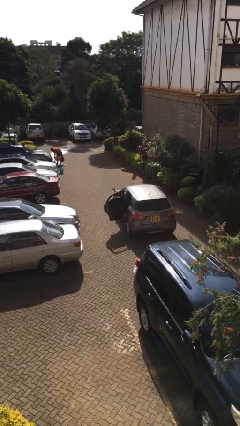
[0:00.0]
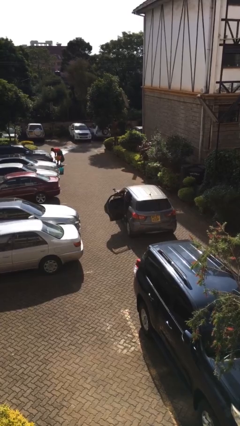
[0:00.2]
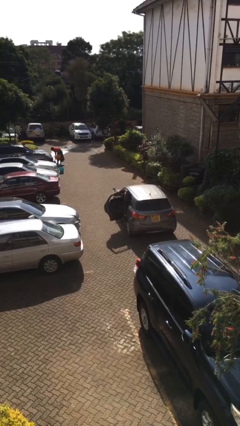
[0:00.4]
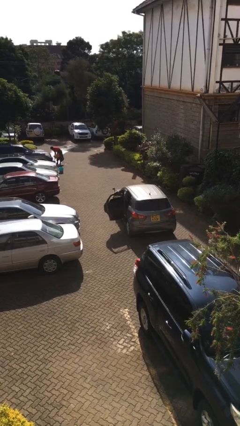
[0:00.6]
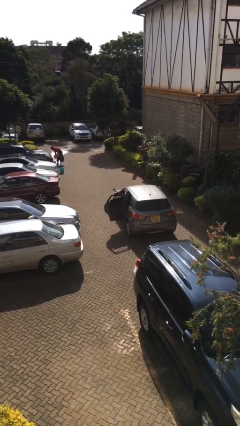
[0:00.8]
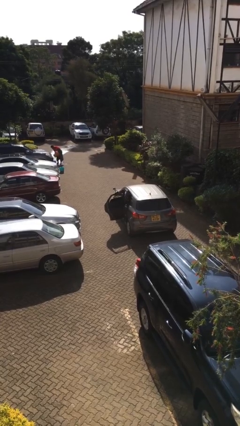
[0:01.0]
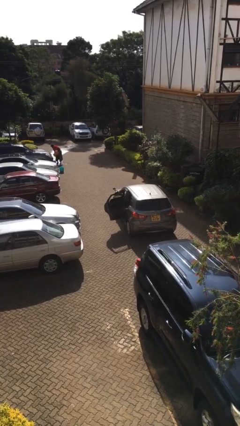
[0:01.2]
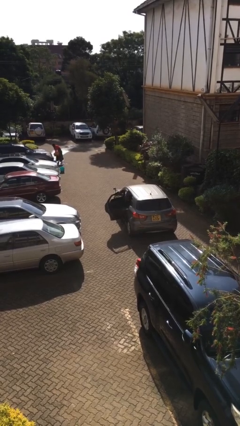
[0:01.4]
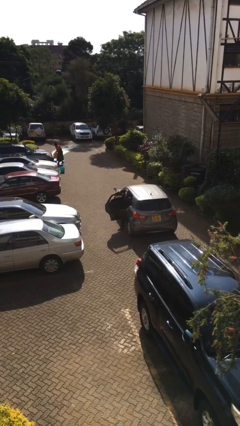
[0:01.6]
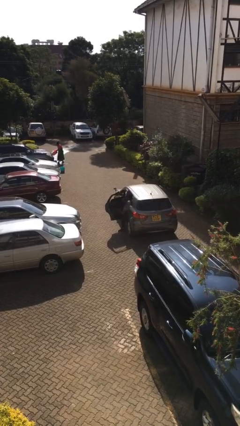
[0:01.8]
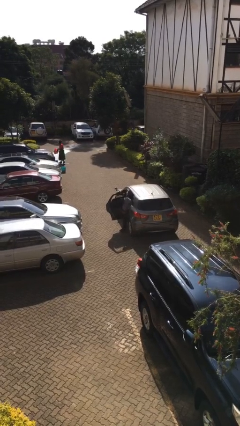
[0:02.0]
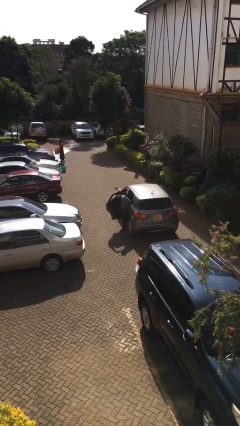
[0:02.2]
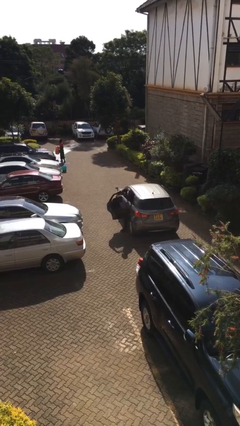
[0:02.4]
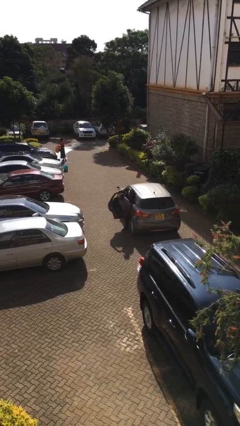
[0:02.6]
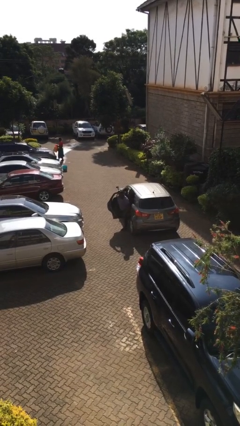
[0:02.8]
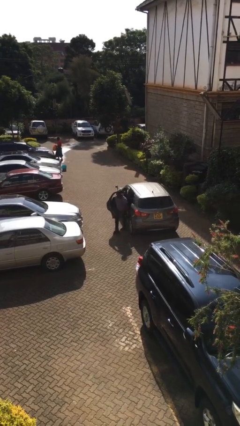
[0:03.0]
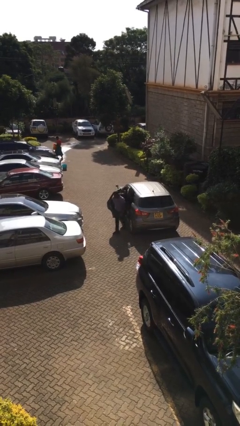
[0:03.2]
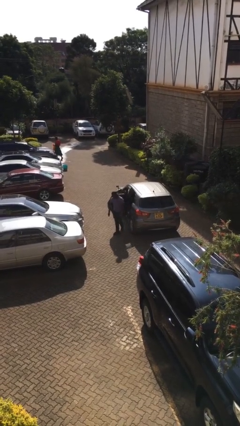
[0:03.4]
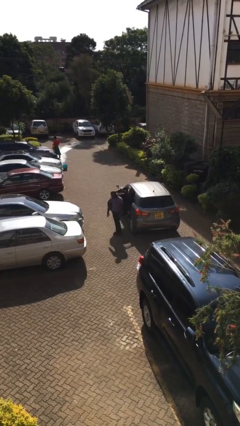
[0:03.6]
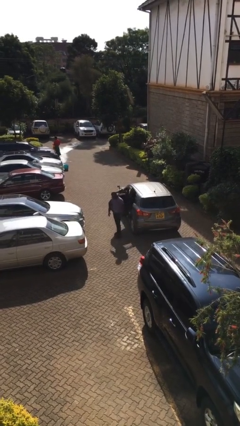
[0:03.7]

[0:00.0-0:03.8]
person exits car

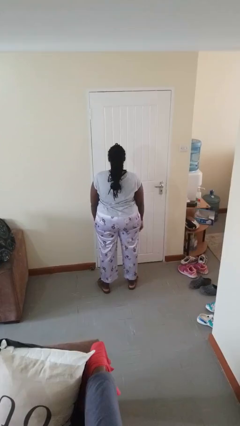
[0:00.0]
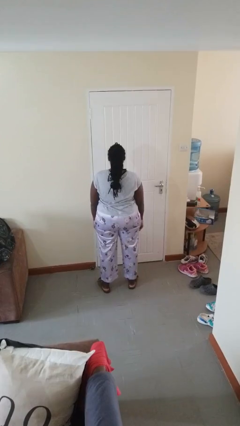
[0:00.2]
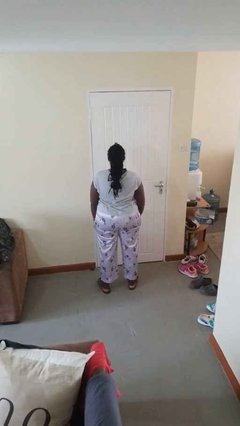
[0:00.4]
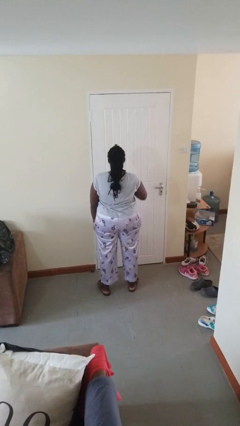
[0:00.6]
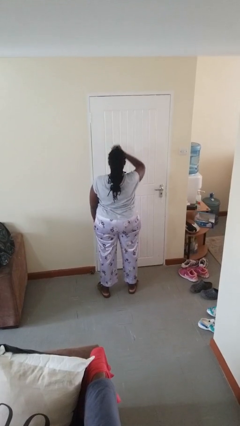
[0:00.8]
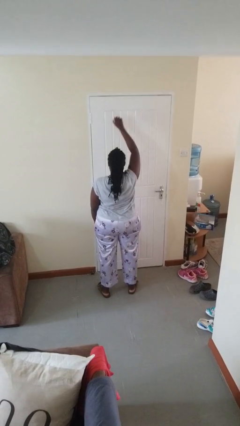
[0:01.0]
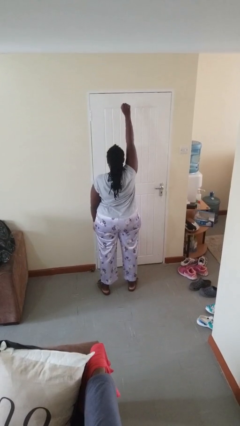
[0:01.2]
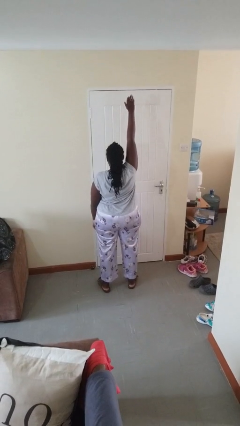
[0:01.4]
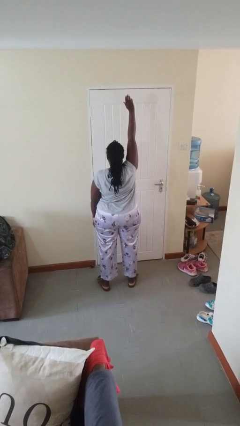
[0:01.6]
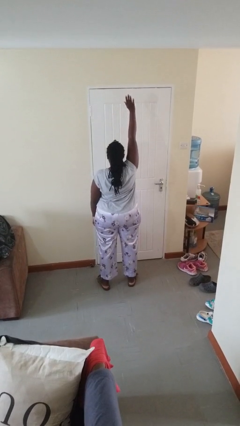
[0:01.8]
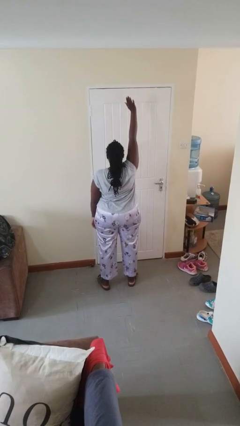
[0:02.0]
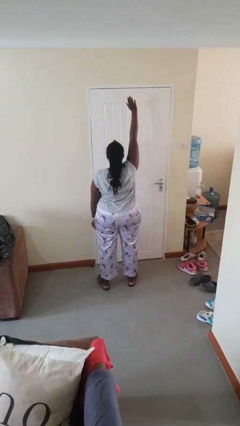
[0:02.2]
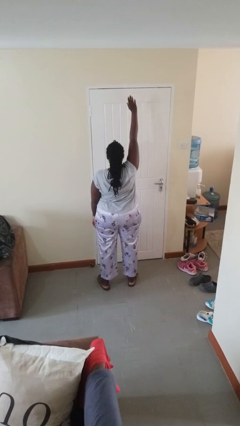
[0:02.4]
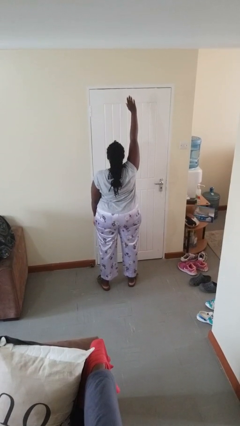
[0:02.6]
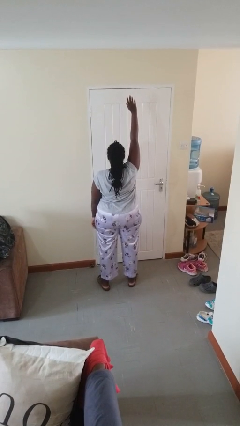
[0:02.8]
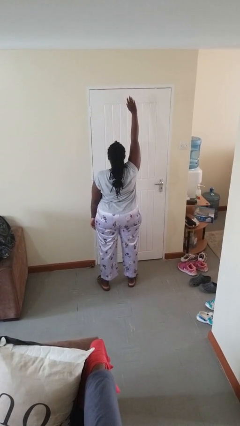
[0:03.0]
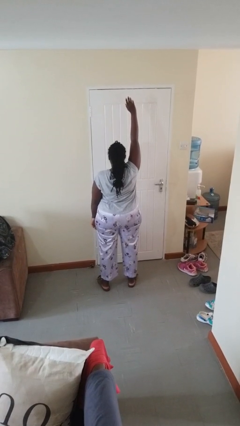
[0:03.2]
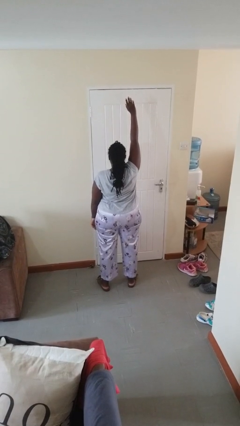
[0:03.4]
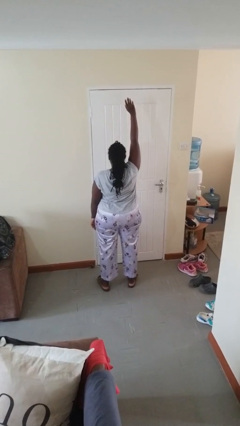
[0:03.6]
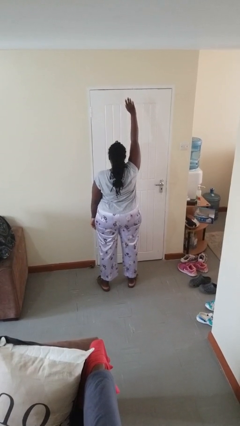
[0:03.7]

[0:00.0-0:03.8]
person gestures raise hand

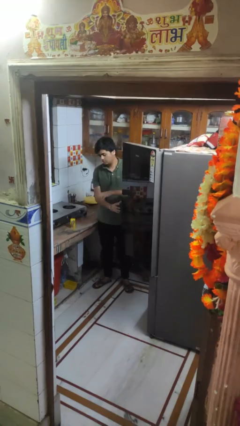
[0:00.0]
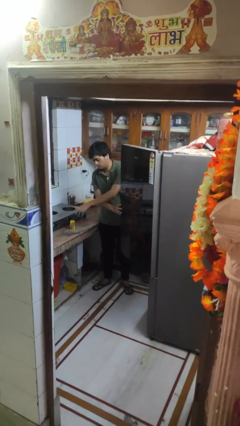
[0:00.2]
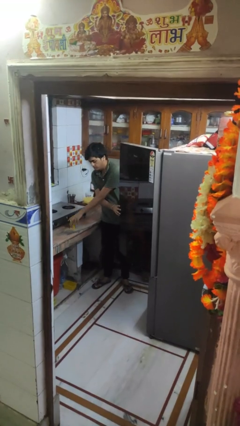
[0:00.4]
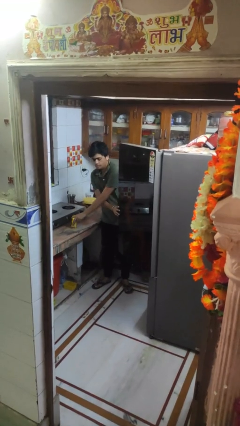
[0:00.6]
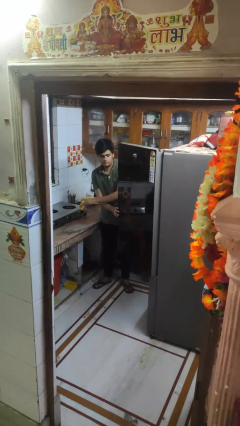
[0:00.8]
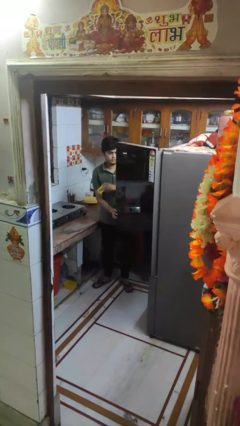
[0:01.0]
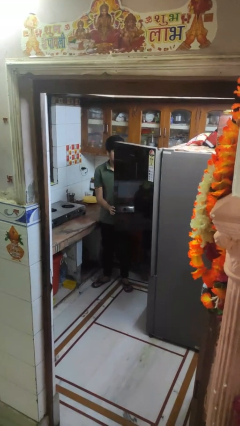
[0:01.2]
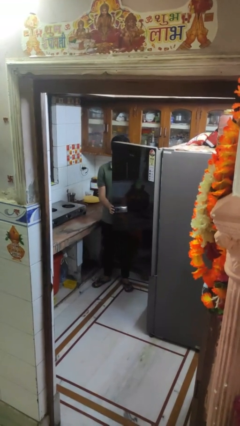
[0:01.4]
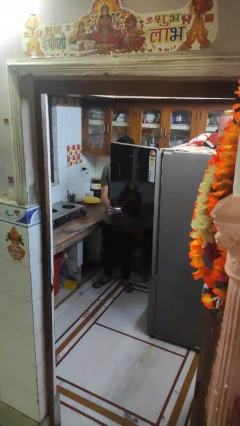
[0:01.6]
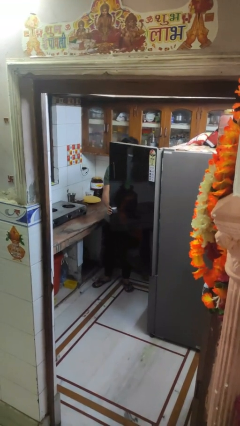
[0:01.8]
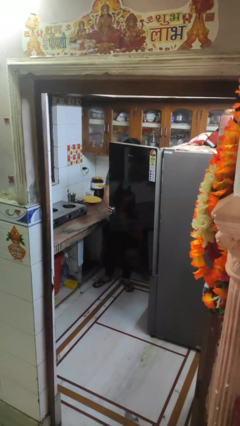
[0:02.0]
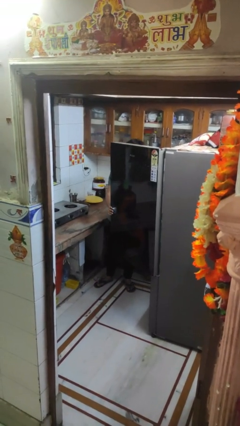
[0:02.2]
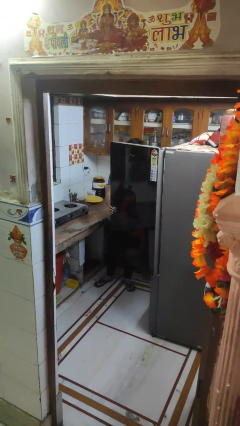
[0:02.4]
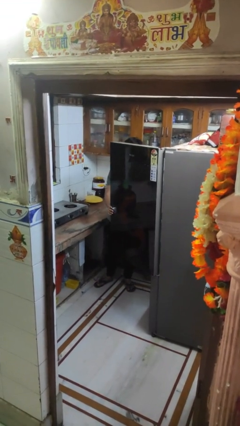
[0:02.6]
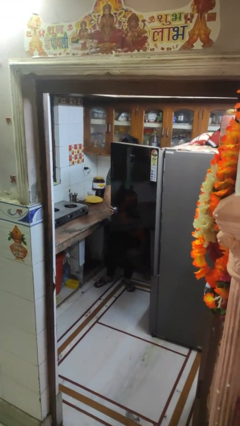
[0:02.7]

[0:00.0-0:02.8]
person puts object into refrigerator

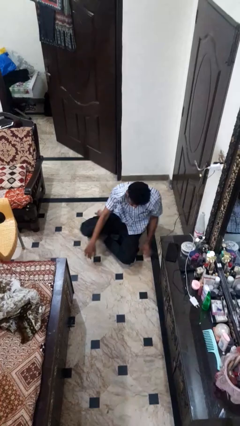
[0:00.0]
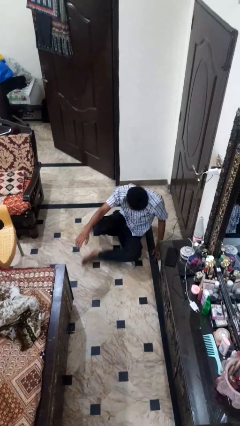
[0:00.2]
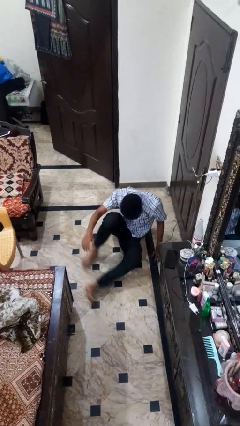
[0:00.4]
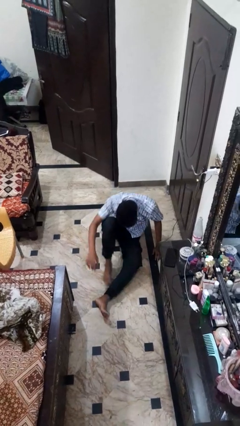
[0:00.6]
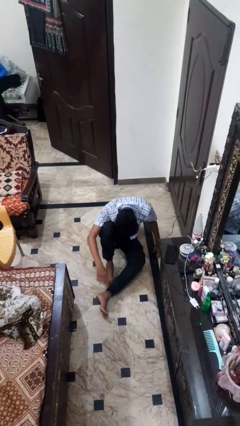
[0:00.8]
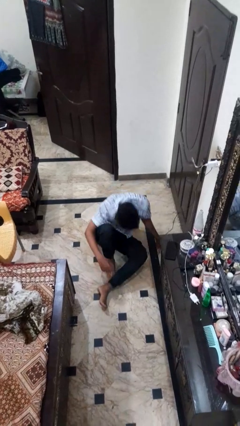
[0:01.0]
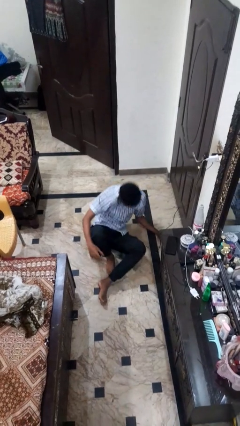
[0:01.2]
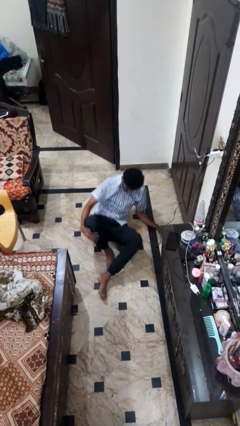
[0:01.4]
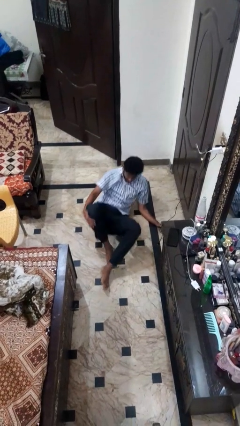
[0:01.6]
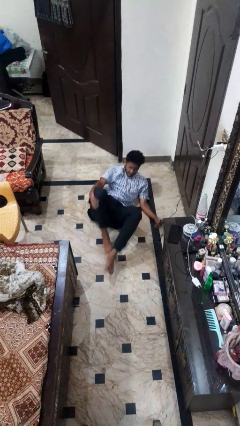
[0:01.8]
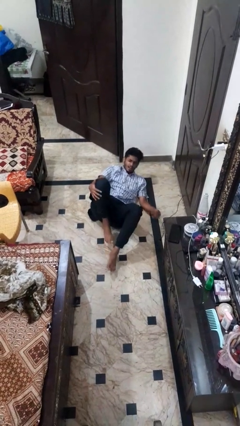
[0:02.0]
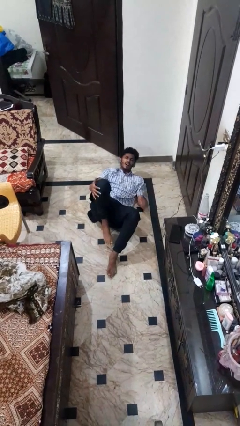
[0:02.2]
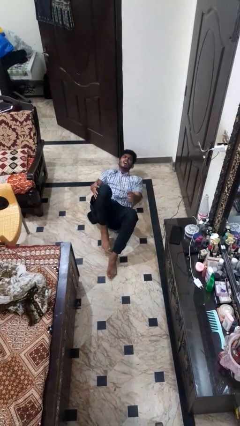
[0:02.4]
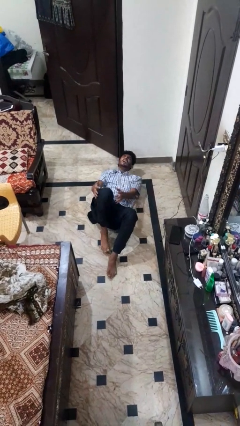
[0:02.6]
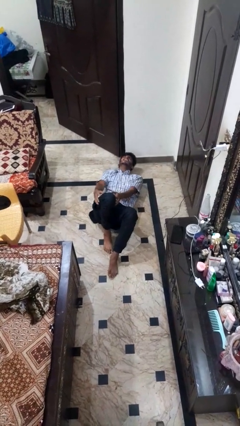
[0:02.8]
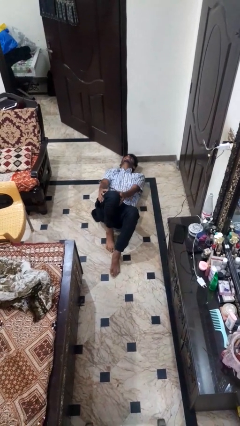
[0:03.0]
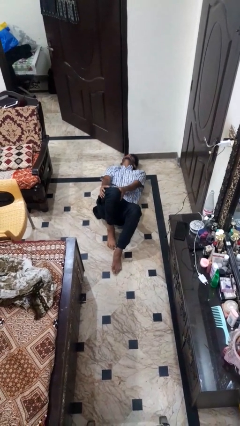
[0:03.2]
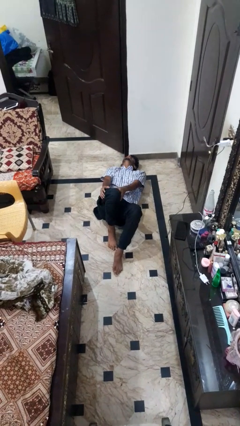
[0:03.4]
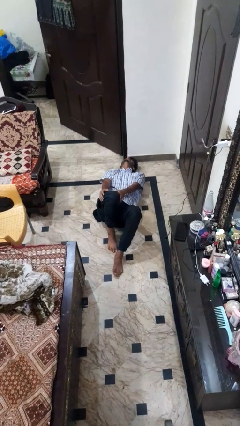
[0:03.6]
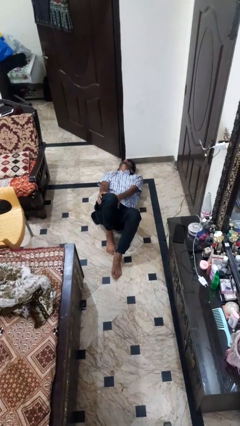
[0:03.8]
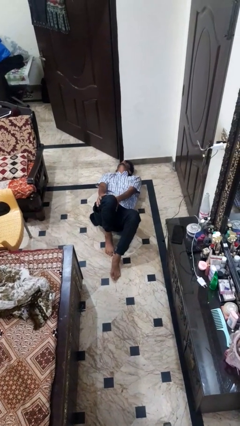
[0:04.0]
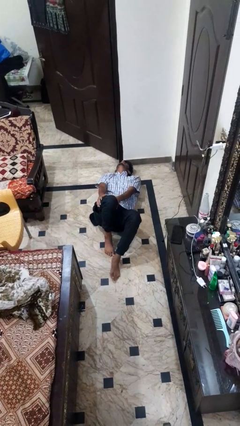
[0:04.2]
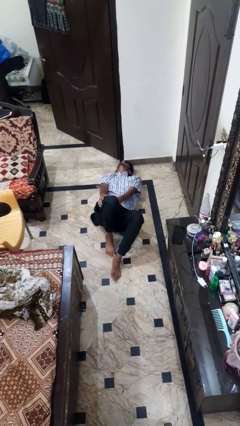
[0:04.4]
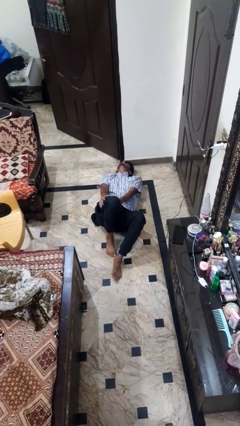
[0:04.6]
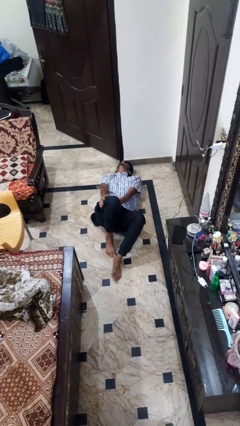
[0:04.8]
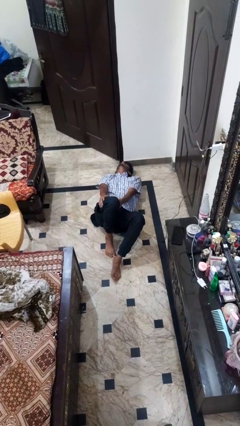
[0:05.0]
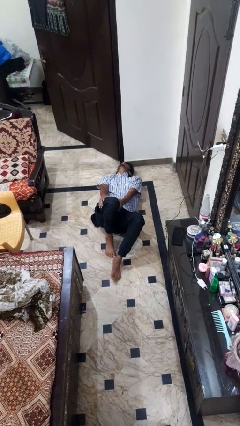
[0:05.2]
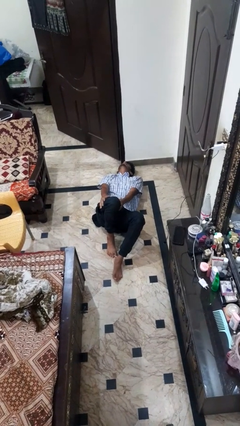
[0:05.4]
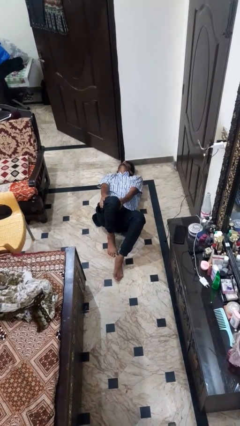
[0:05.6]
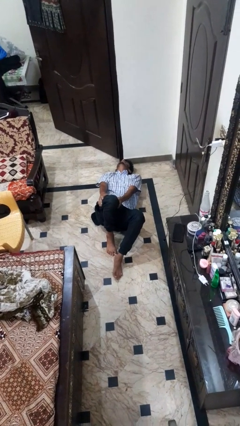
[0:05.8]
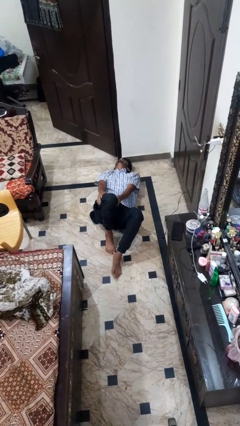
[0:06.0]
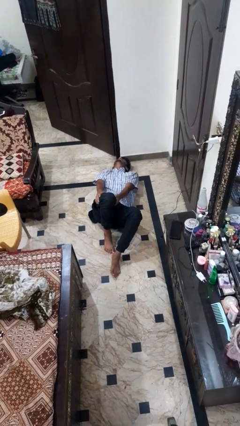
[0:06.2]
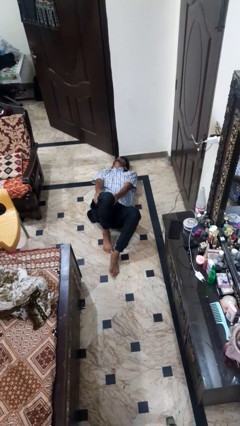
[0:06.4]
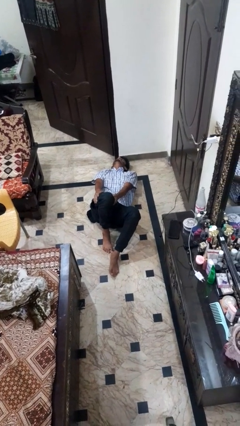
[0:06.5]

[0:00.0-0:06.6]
person lies down on floor

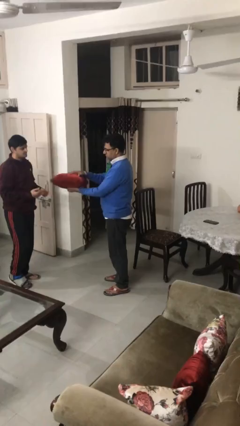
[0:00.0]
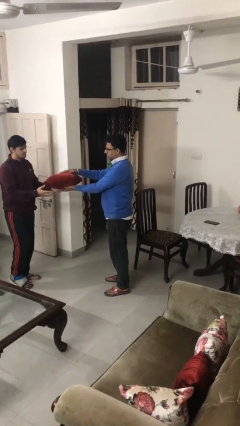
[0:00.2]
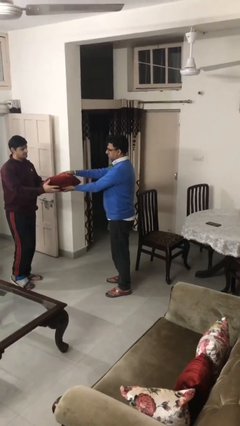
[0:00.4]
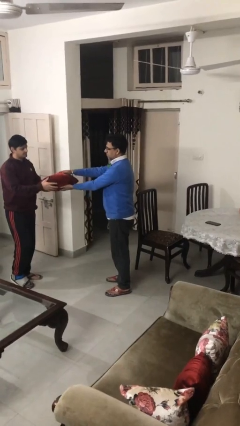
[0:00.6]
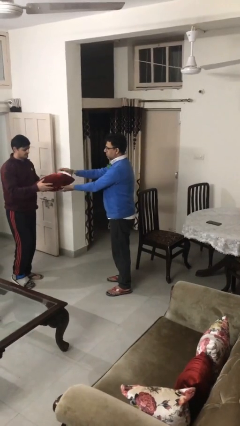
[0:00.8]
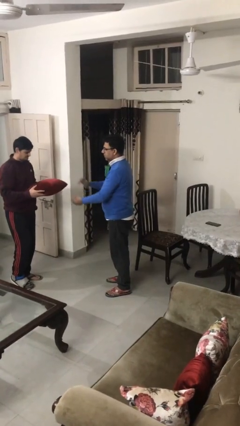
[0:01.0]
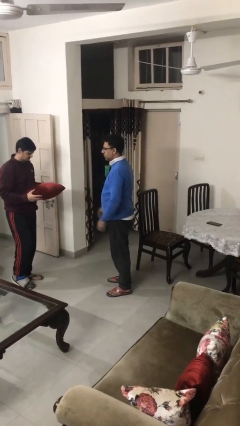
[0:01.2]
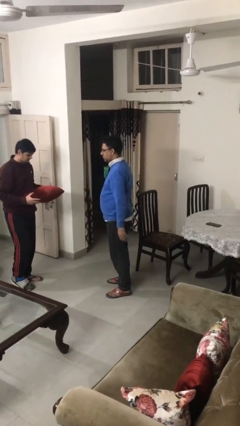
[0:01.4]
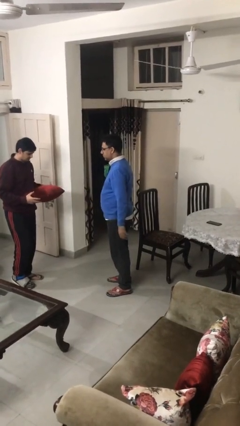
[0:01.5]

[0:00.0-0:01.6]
person transfers object to person
